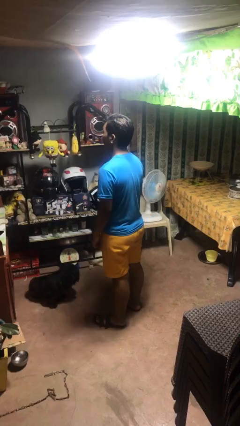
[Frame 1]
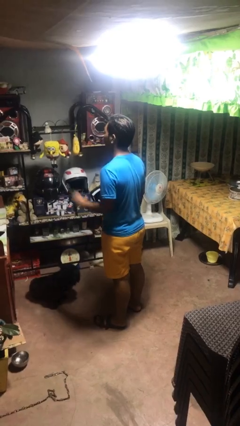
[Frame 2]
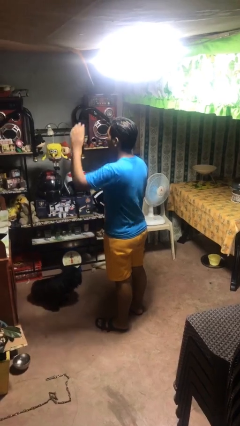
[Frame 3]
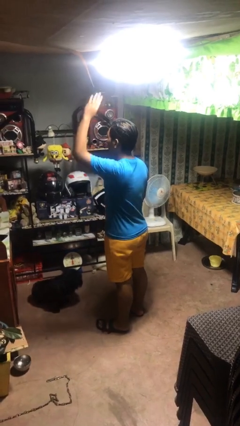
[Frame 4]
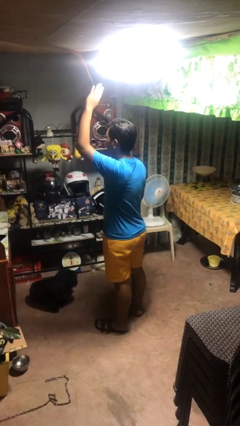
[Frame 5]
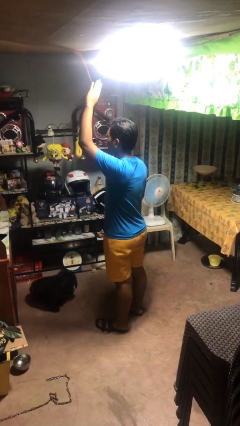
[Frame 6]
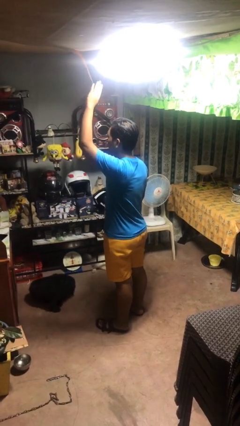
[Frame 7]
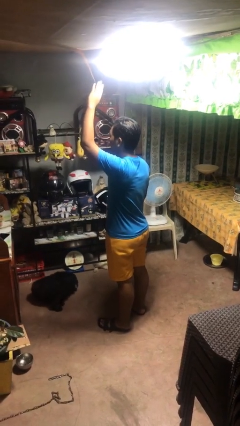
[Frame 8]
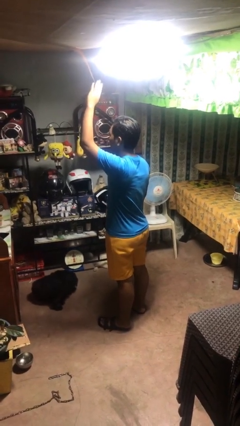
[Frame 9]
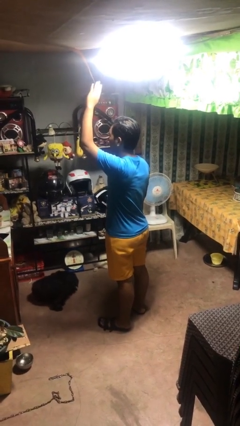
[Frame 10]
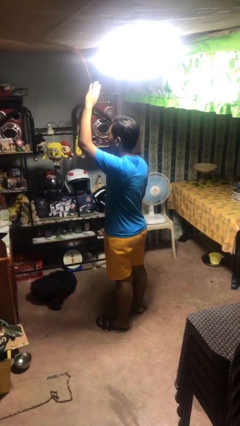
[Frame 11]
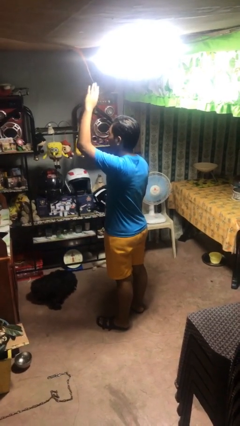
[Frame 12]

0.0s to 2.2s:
person gestures raise hand

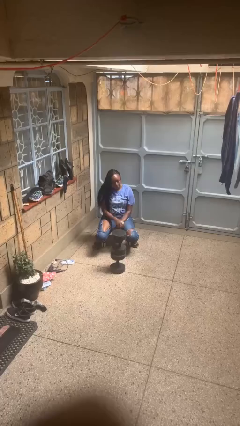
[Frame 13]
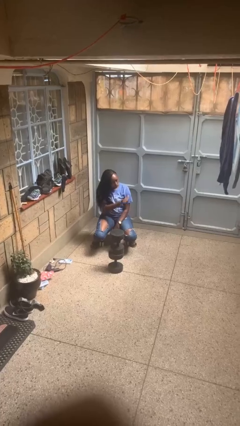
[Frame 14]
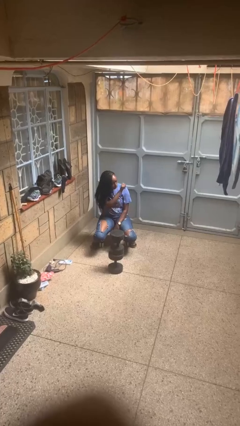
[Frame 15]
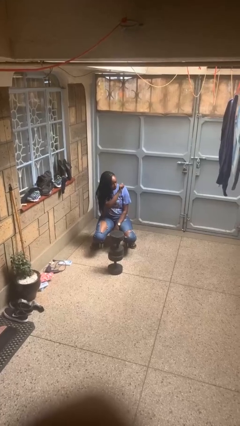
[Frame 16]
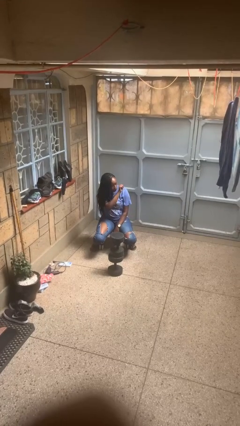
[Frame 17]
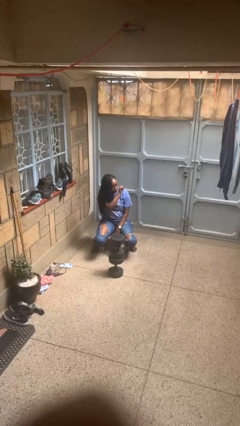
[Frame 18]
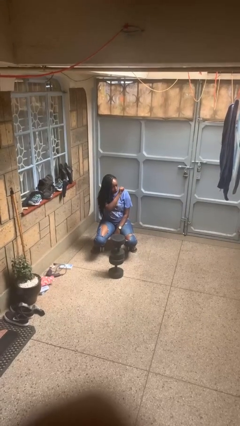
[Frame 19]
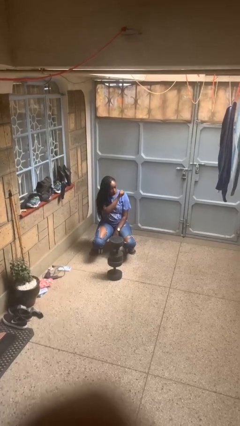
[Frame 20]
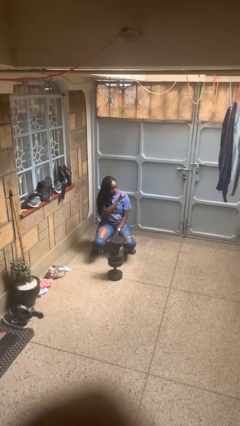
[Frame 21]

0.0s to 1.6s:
person gestures behind me

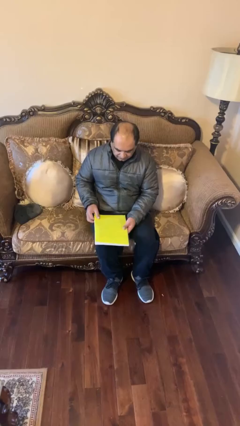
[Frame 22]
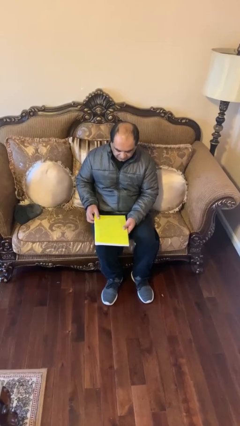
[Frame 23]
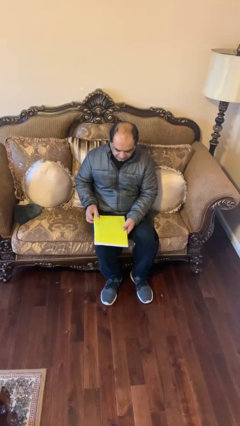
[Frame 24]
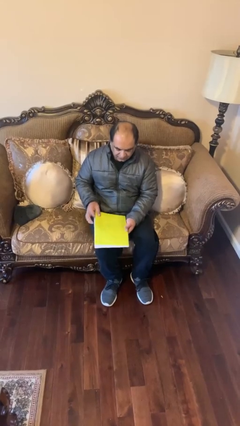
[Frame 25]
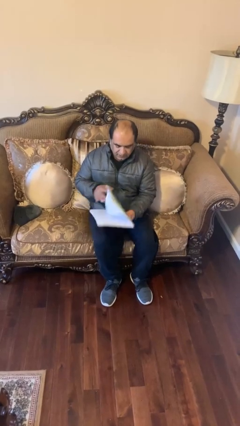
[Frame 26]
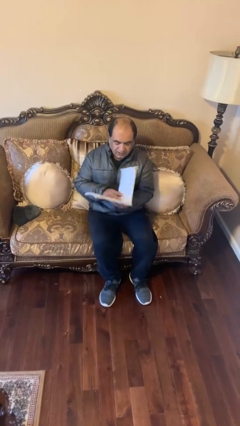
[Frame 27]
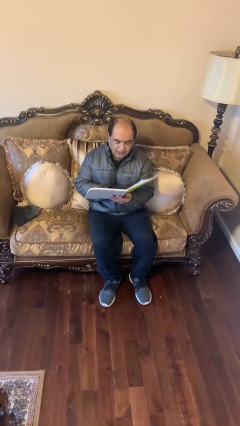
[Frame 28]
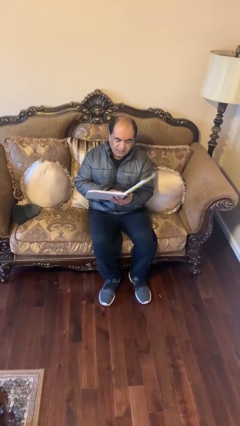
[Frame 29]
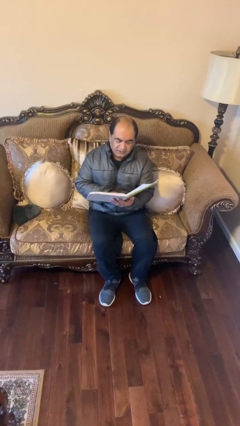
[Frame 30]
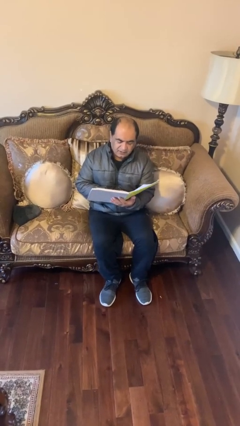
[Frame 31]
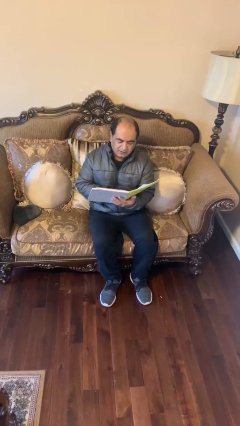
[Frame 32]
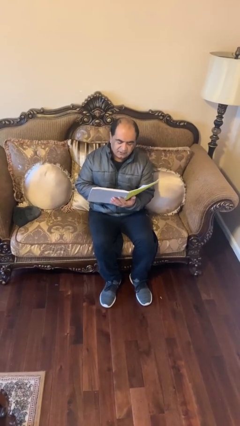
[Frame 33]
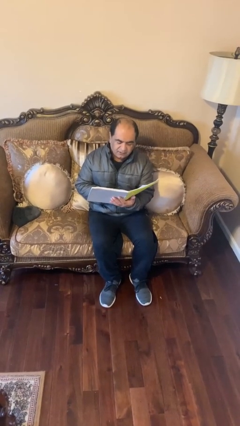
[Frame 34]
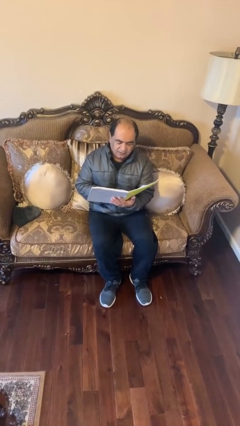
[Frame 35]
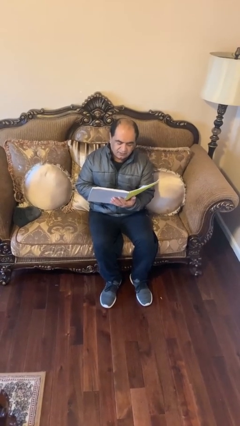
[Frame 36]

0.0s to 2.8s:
person reads document

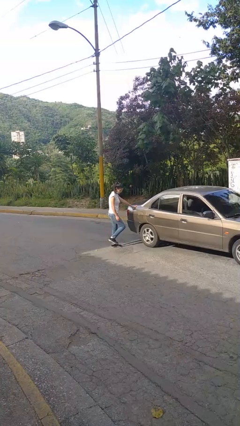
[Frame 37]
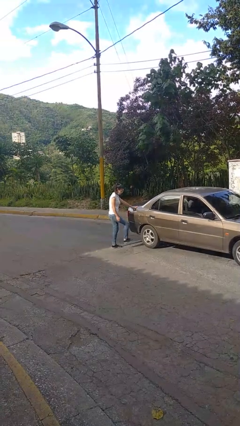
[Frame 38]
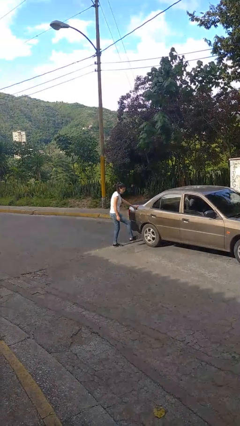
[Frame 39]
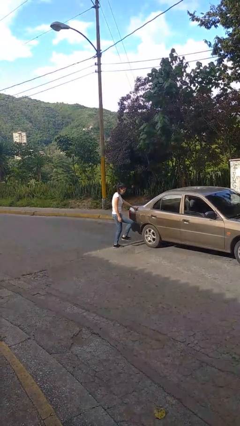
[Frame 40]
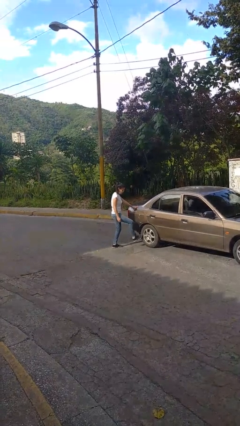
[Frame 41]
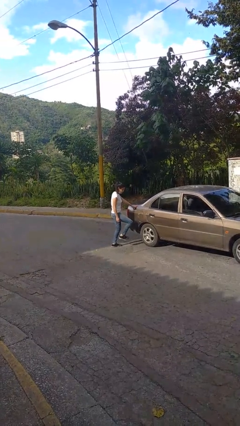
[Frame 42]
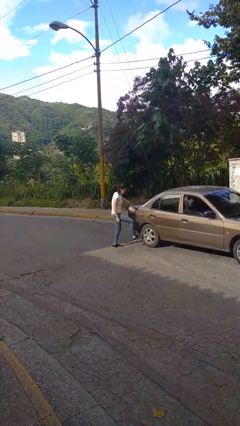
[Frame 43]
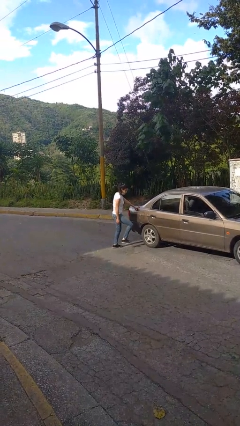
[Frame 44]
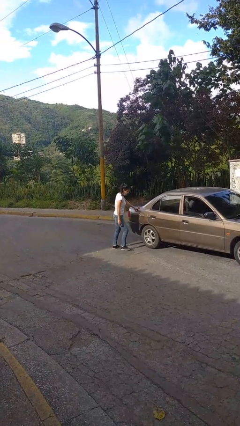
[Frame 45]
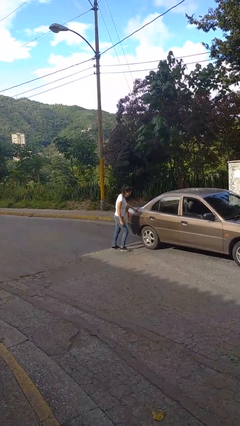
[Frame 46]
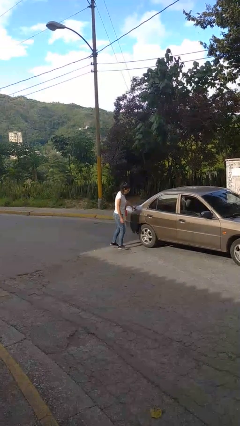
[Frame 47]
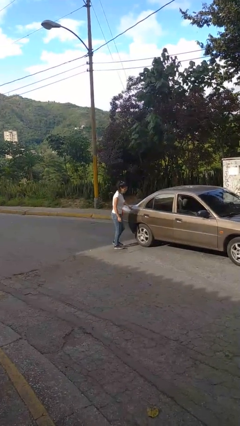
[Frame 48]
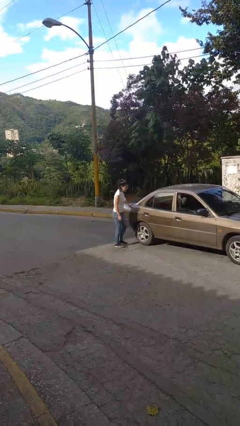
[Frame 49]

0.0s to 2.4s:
person kicks car tires

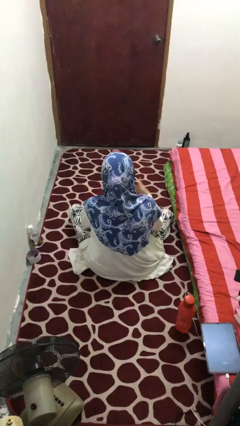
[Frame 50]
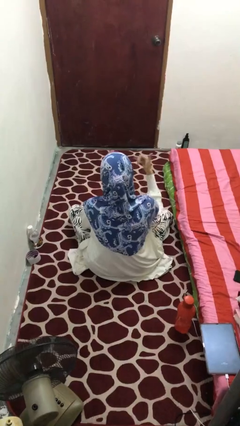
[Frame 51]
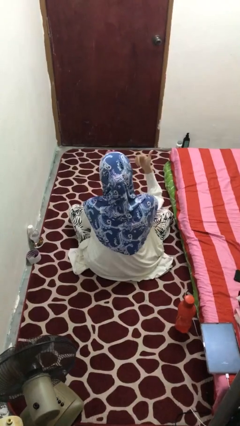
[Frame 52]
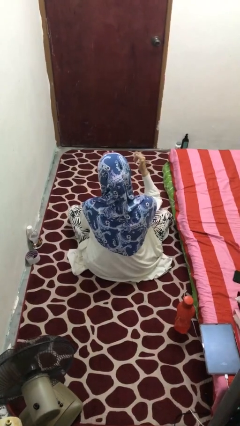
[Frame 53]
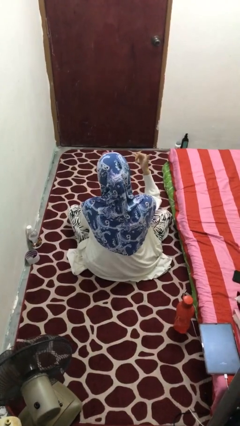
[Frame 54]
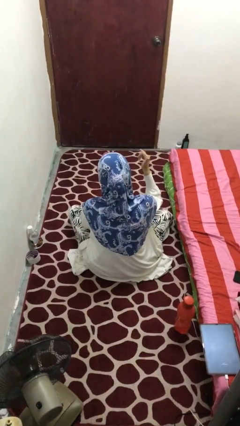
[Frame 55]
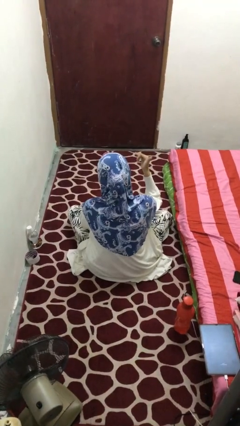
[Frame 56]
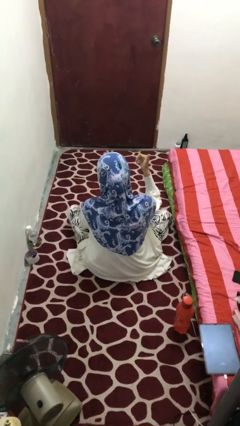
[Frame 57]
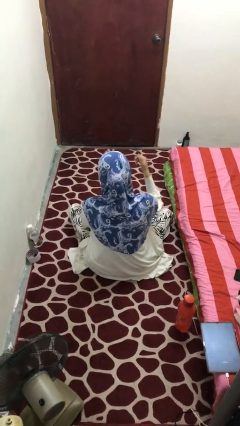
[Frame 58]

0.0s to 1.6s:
person gestures hang loose

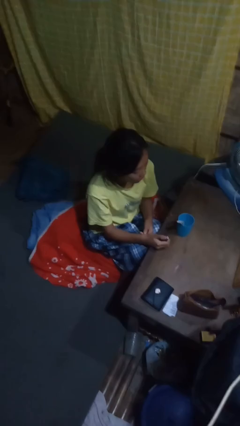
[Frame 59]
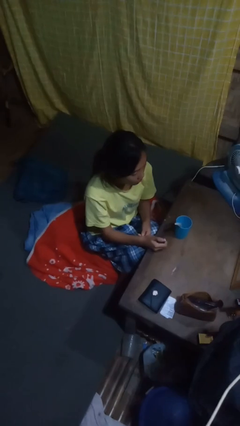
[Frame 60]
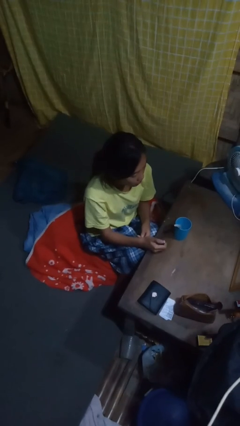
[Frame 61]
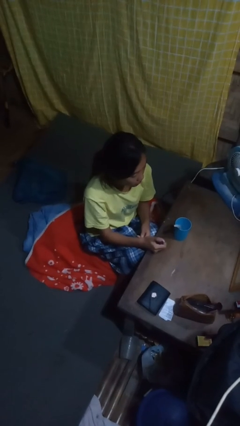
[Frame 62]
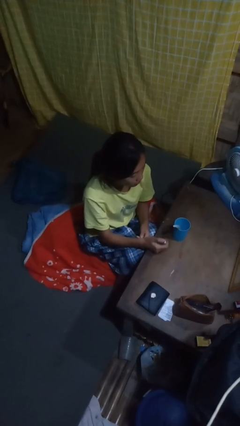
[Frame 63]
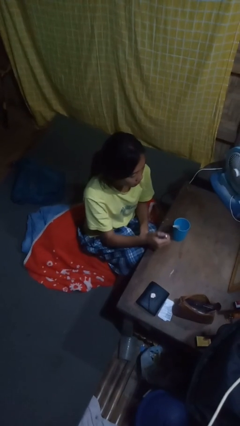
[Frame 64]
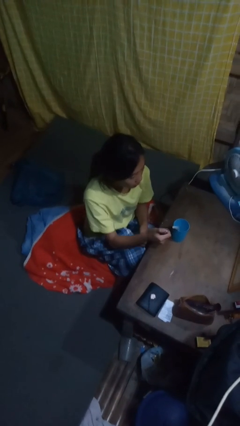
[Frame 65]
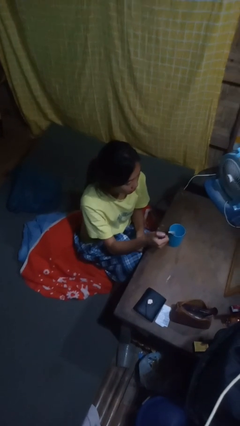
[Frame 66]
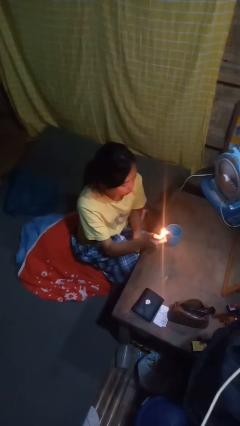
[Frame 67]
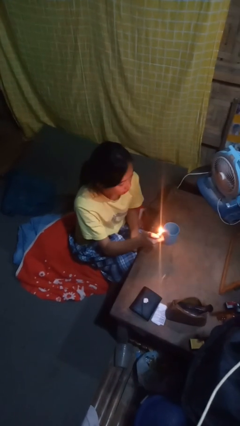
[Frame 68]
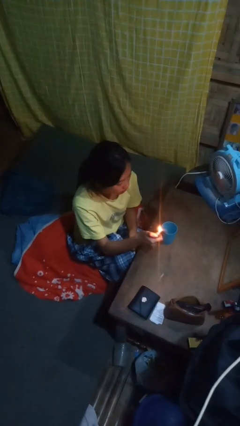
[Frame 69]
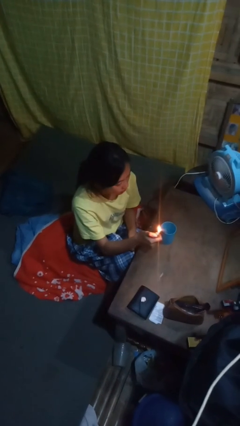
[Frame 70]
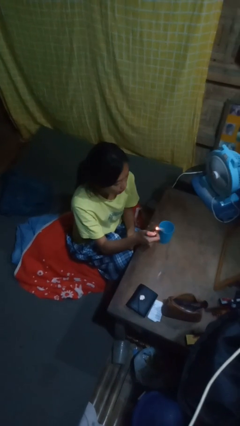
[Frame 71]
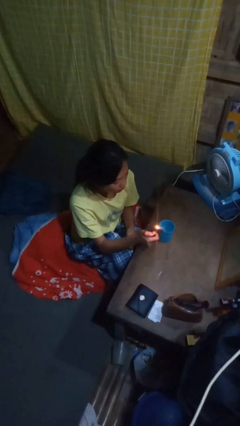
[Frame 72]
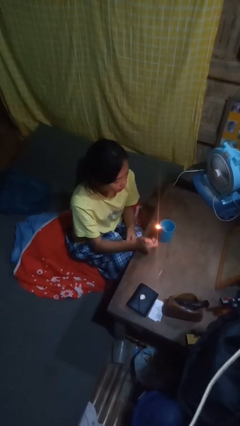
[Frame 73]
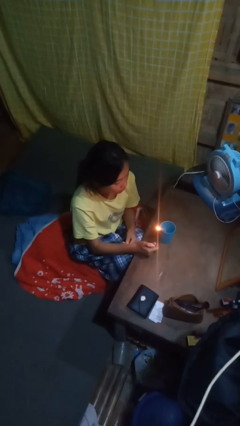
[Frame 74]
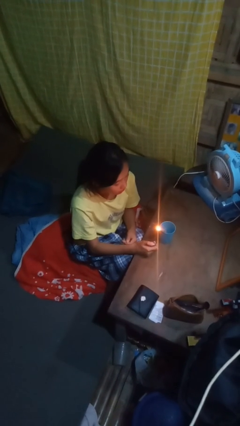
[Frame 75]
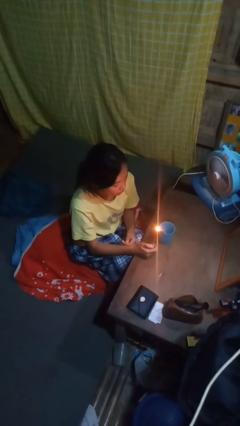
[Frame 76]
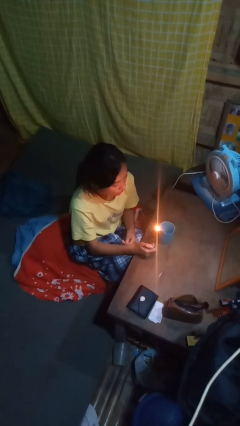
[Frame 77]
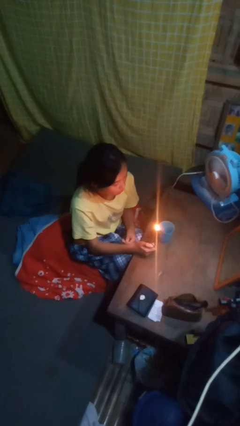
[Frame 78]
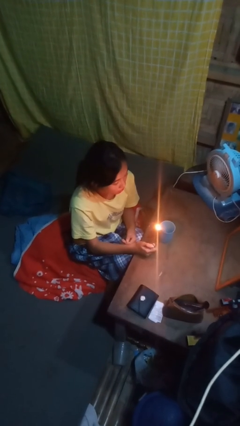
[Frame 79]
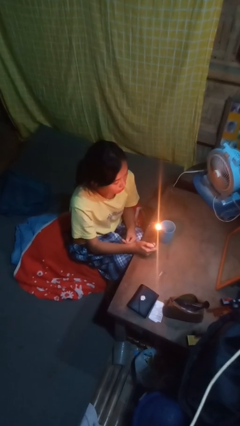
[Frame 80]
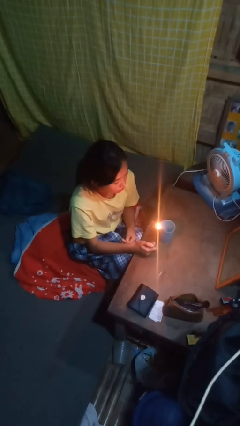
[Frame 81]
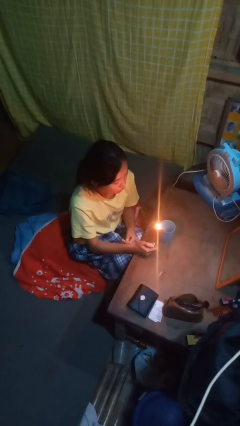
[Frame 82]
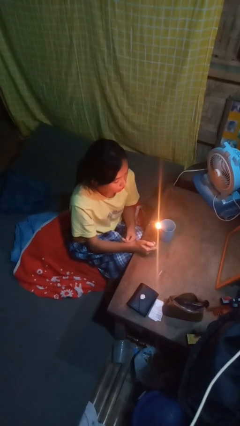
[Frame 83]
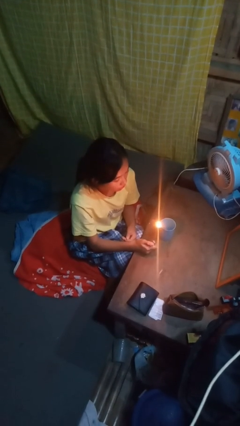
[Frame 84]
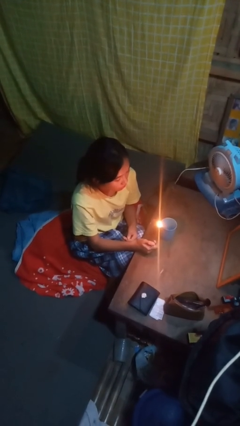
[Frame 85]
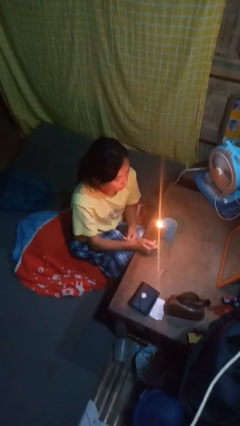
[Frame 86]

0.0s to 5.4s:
person lights candle

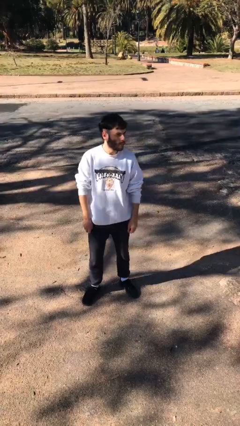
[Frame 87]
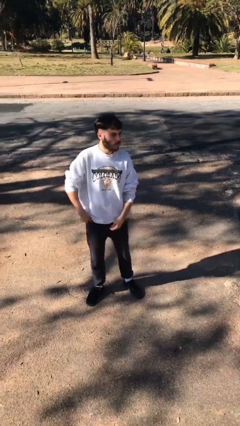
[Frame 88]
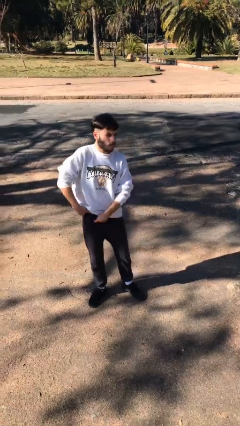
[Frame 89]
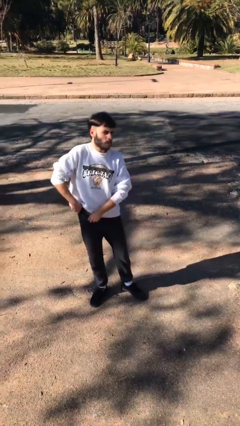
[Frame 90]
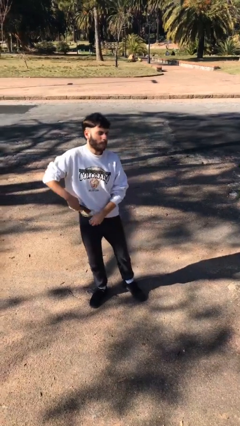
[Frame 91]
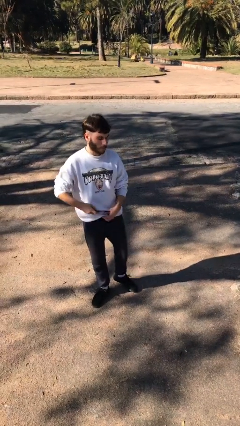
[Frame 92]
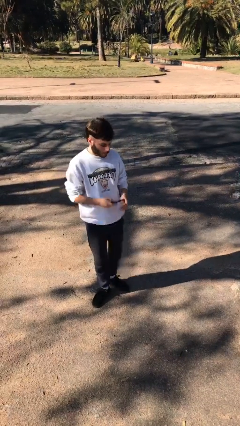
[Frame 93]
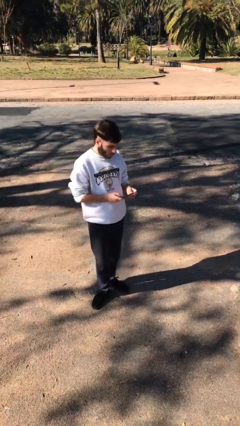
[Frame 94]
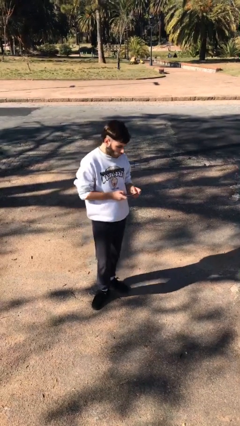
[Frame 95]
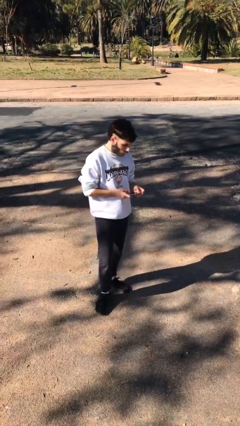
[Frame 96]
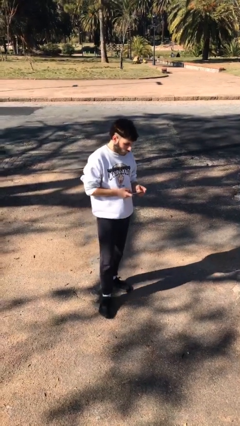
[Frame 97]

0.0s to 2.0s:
person takes phone from pocket
